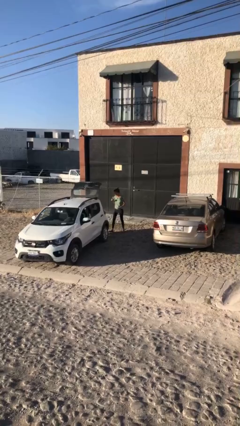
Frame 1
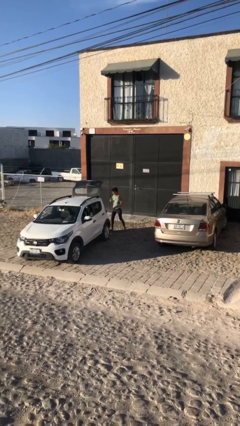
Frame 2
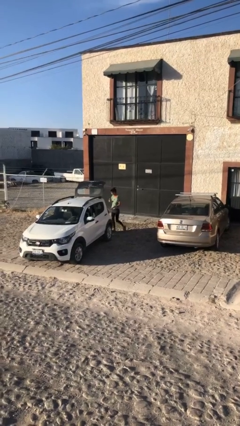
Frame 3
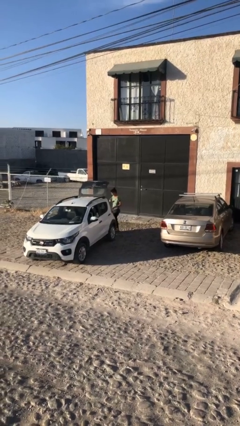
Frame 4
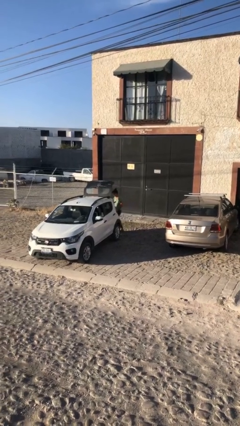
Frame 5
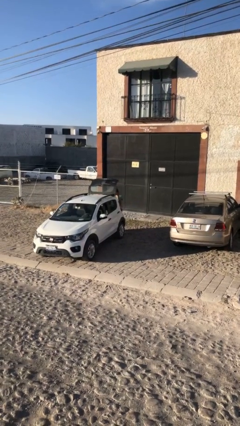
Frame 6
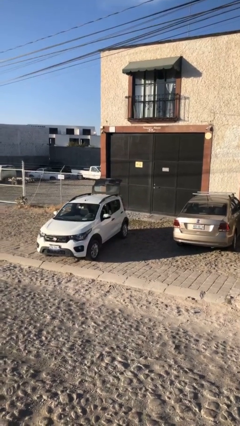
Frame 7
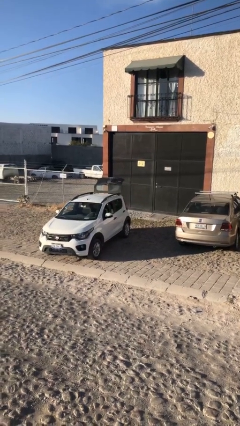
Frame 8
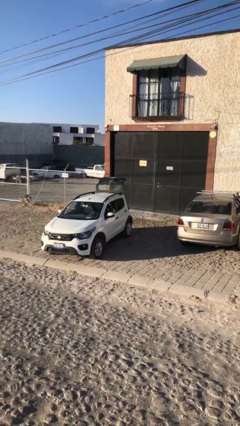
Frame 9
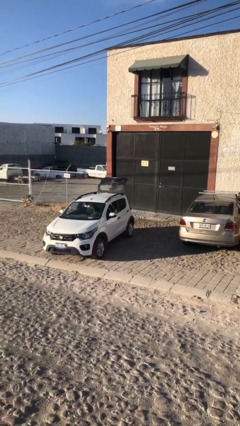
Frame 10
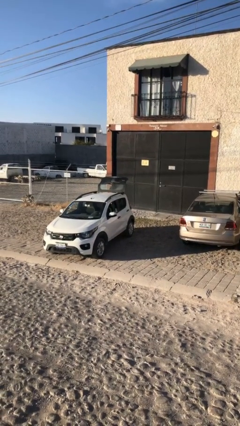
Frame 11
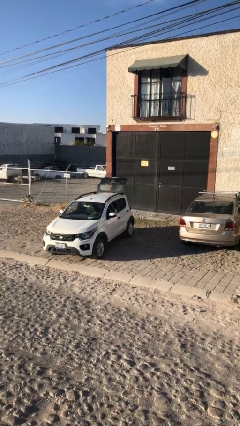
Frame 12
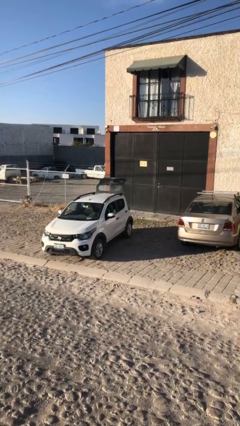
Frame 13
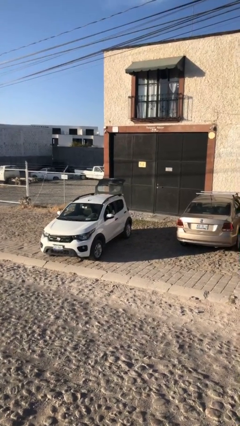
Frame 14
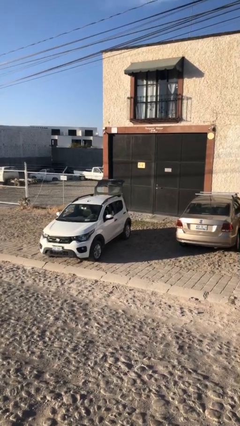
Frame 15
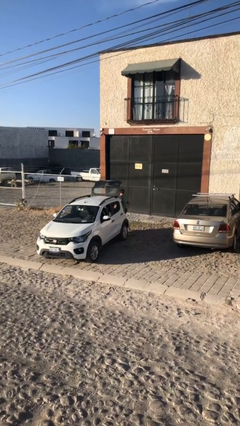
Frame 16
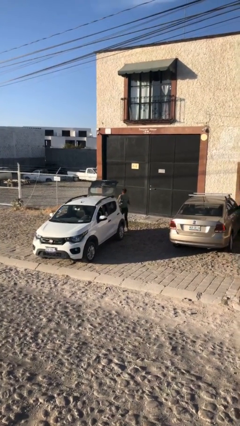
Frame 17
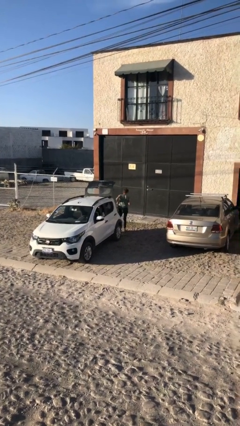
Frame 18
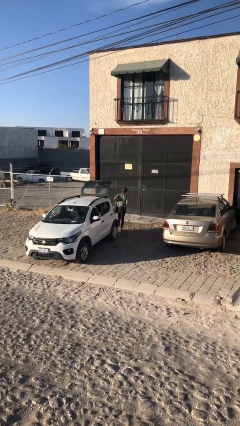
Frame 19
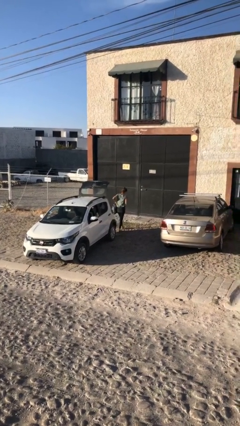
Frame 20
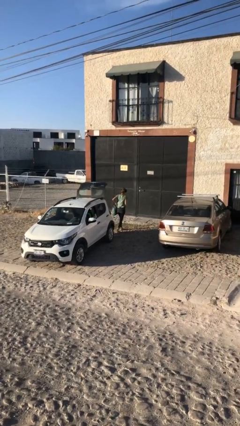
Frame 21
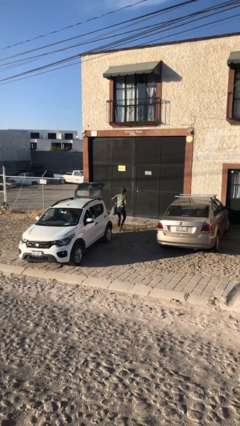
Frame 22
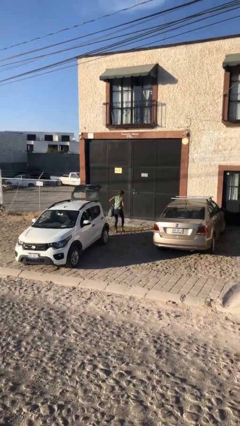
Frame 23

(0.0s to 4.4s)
person unloads car

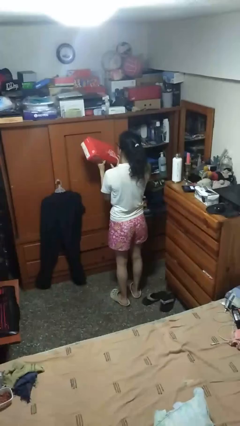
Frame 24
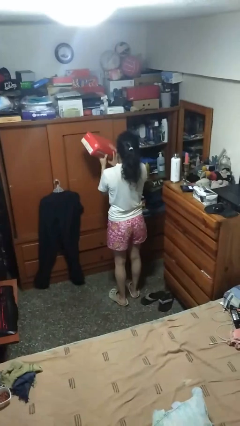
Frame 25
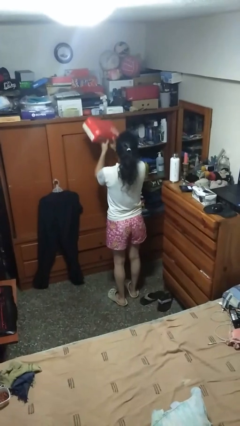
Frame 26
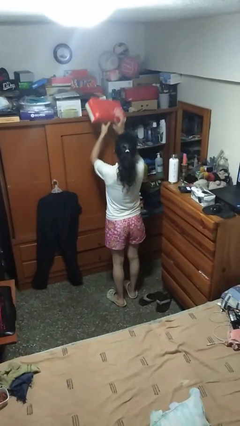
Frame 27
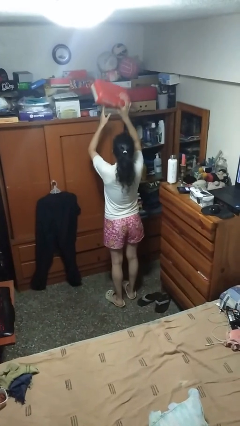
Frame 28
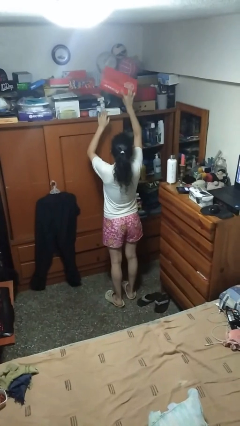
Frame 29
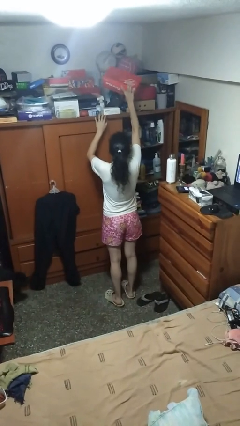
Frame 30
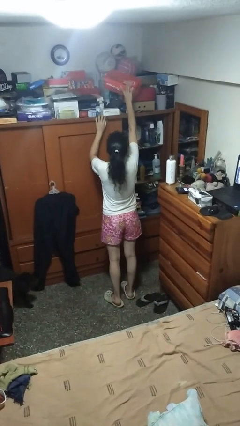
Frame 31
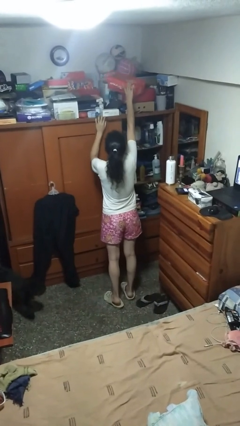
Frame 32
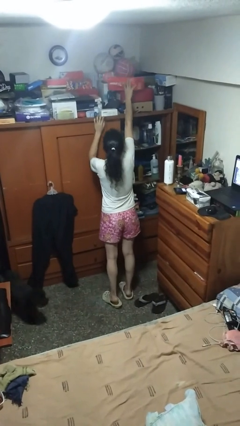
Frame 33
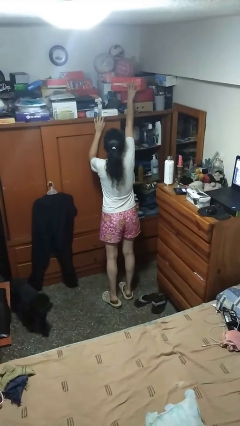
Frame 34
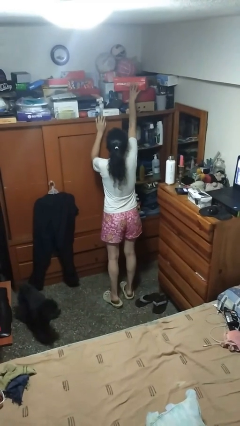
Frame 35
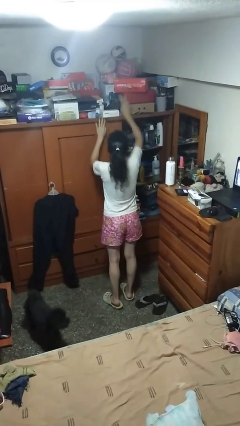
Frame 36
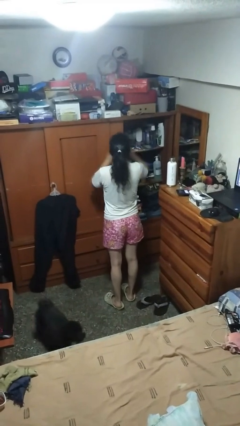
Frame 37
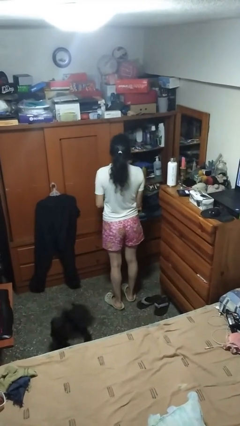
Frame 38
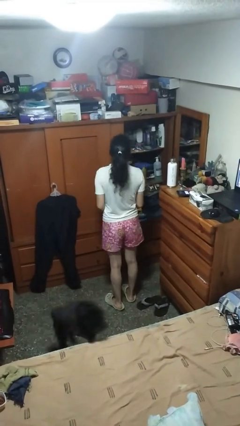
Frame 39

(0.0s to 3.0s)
person puts down object on shelf

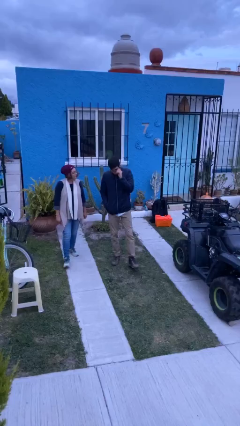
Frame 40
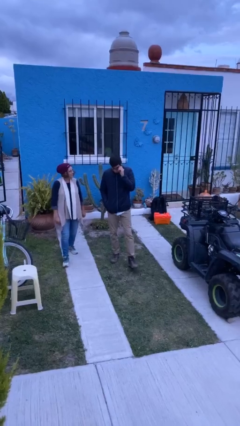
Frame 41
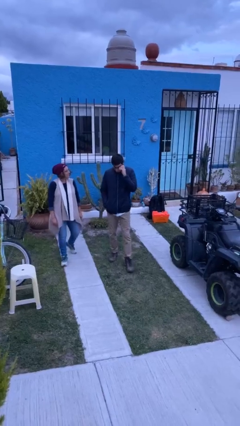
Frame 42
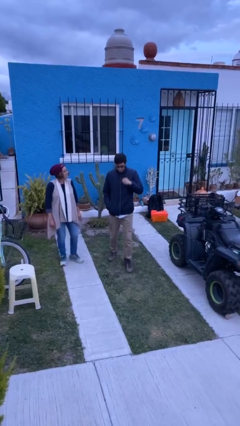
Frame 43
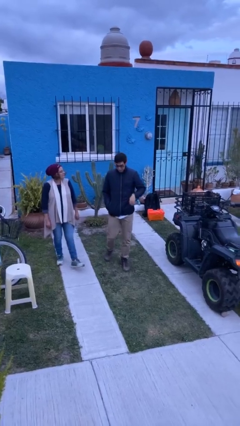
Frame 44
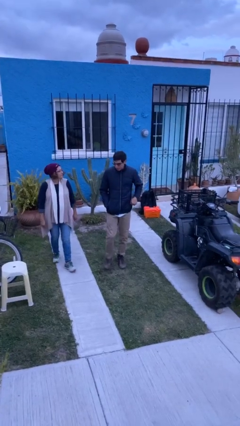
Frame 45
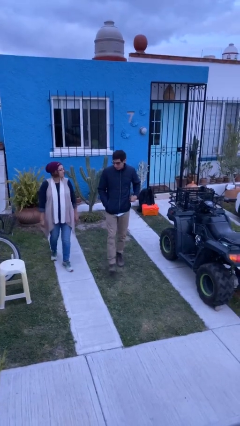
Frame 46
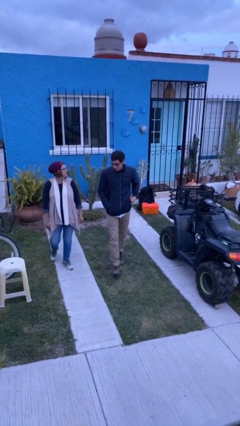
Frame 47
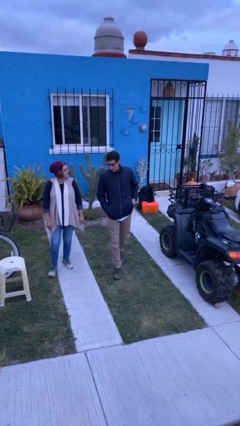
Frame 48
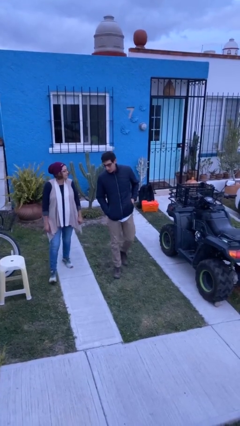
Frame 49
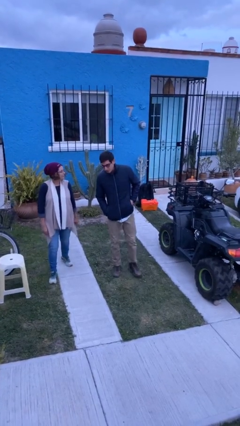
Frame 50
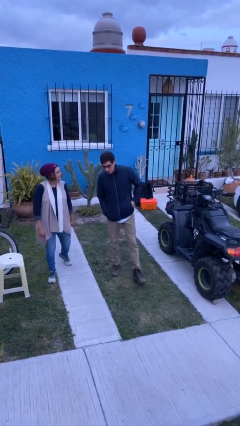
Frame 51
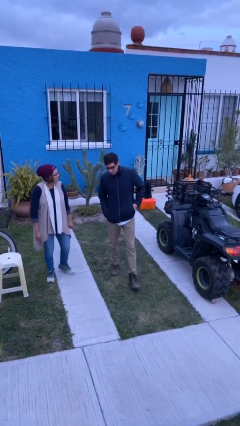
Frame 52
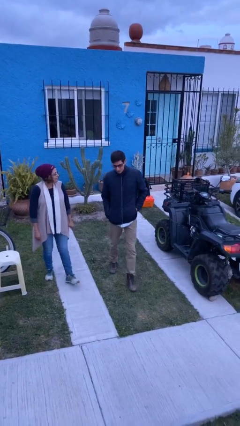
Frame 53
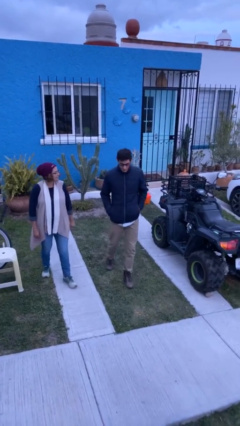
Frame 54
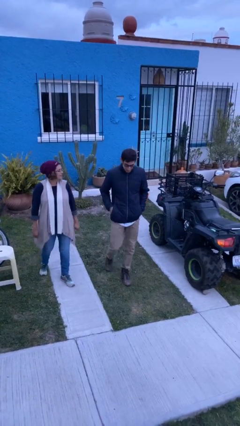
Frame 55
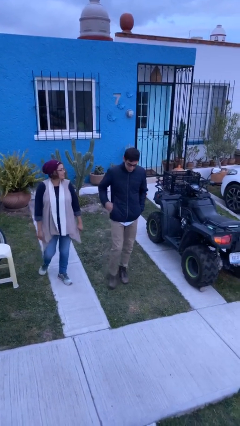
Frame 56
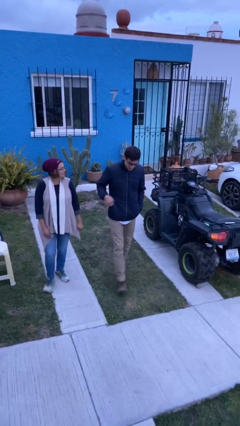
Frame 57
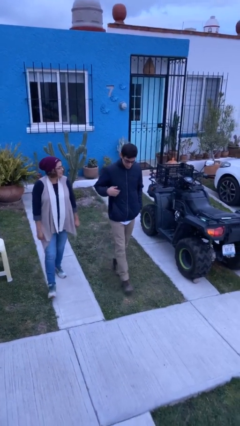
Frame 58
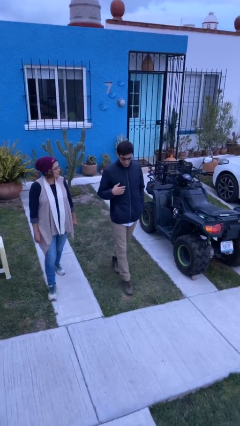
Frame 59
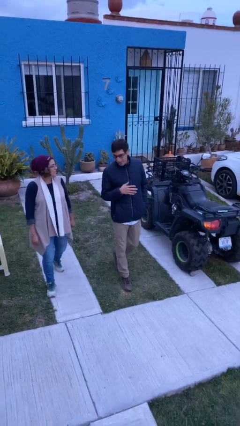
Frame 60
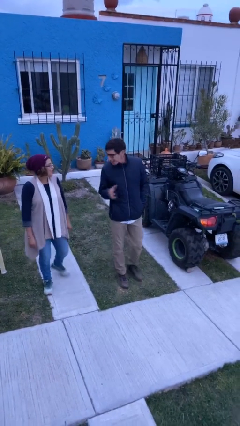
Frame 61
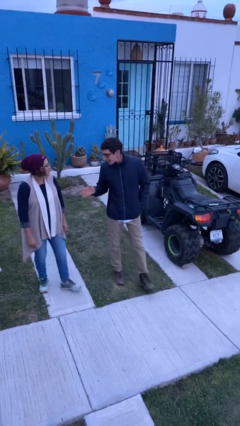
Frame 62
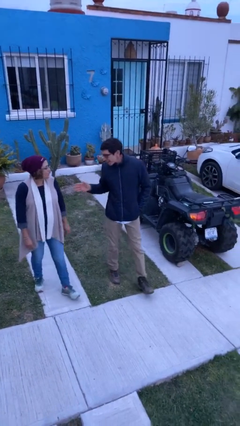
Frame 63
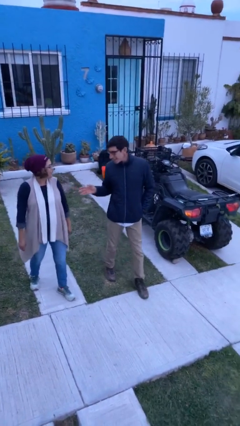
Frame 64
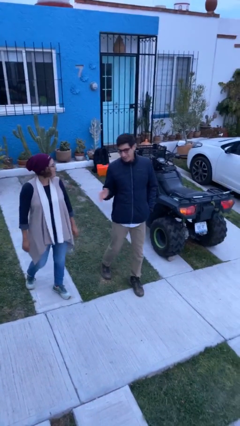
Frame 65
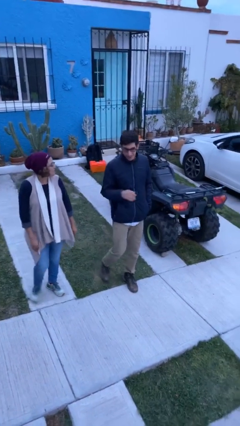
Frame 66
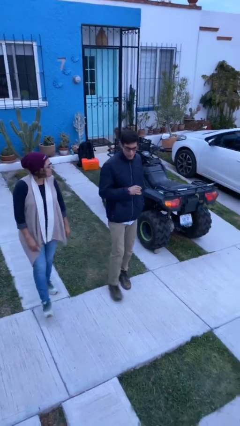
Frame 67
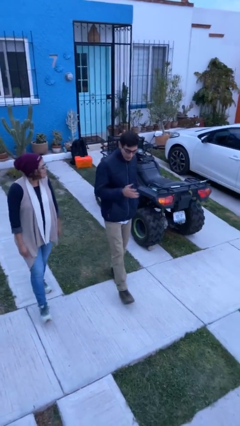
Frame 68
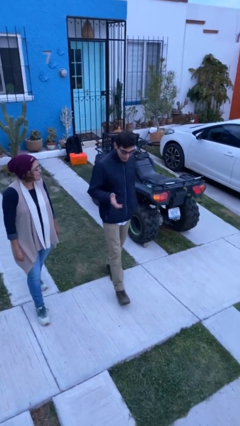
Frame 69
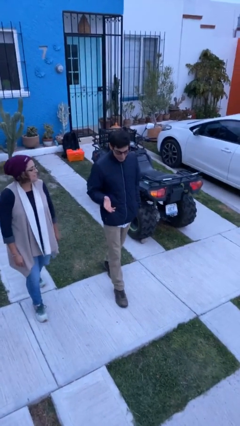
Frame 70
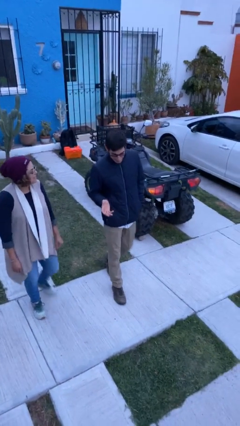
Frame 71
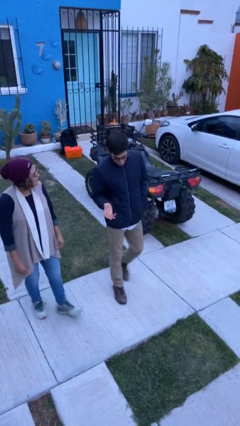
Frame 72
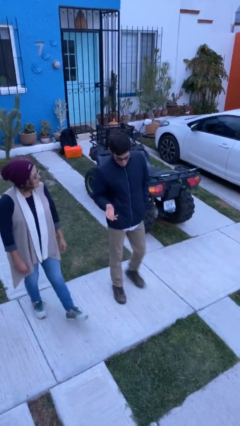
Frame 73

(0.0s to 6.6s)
person talks to person

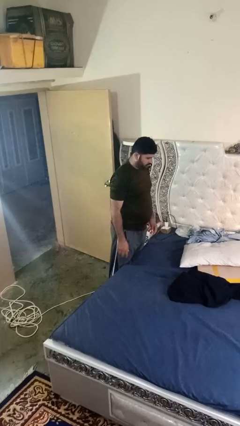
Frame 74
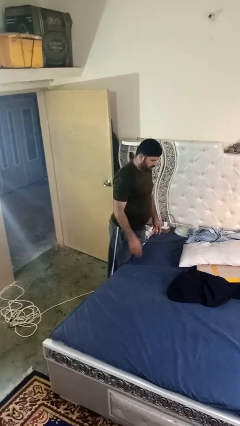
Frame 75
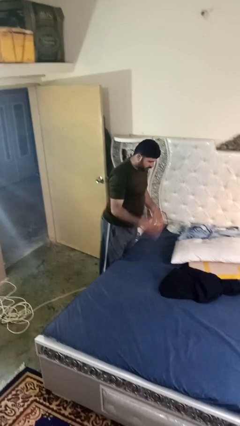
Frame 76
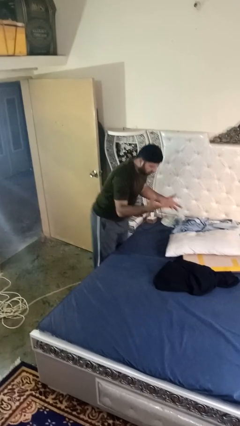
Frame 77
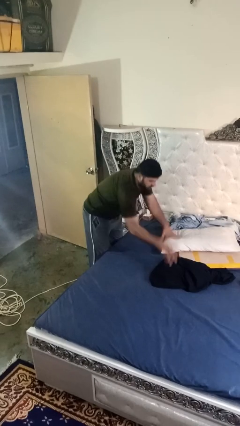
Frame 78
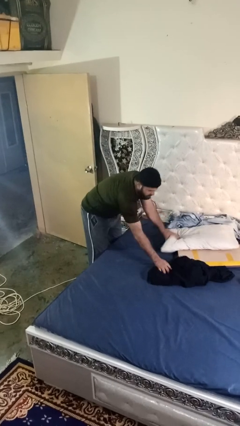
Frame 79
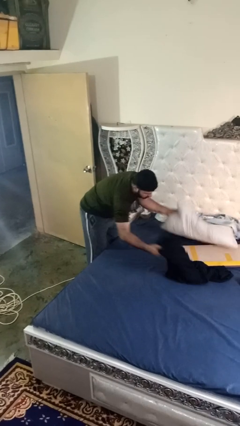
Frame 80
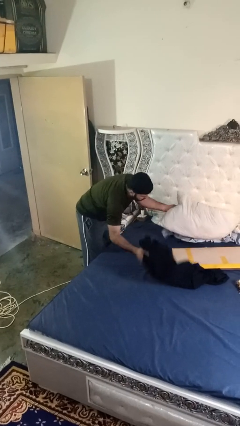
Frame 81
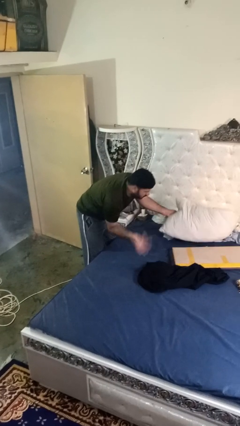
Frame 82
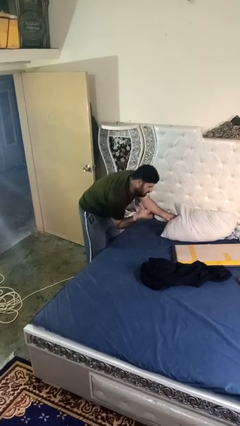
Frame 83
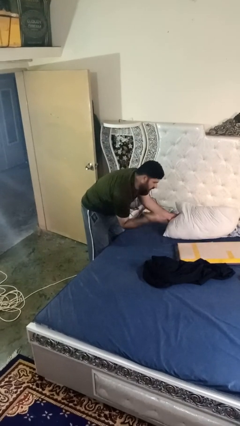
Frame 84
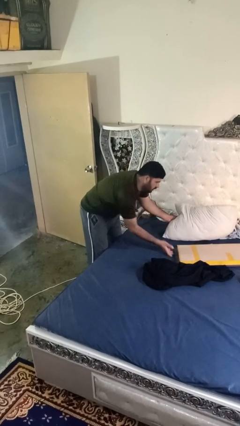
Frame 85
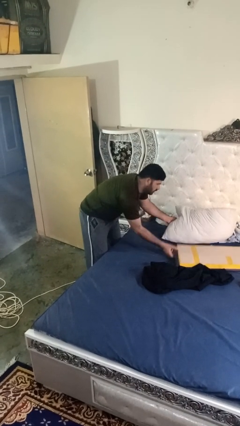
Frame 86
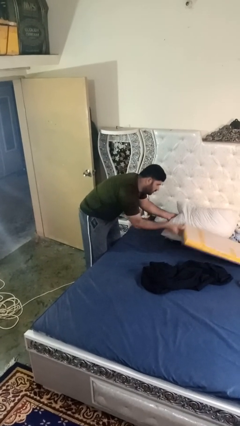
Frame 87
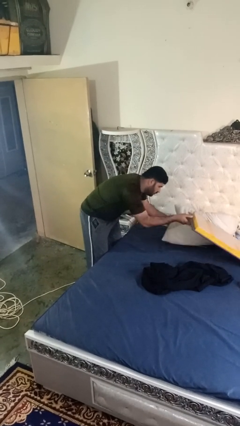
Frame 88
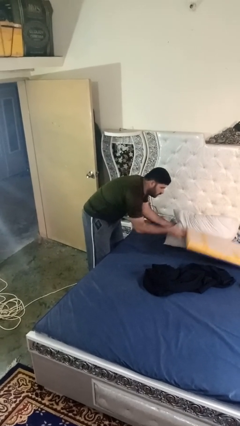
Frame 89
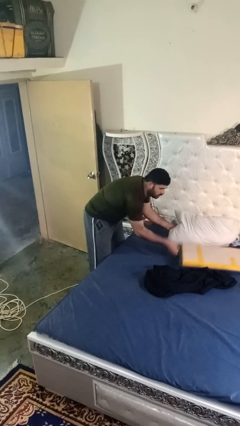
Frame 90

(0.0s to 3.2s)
person searches under bed

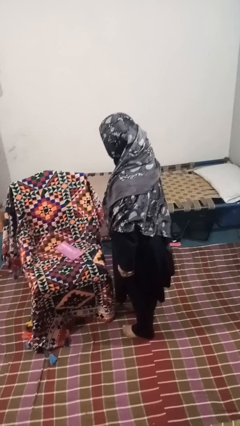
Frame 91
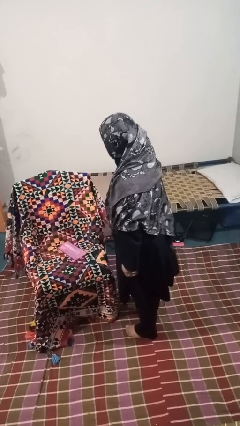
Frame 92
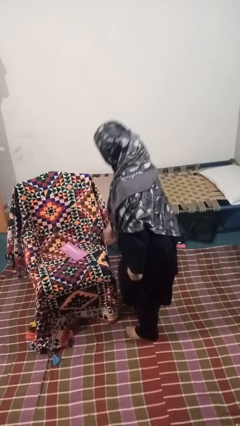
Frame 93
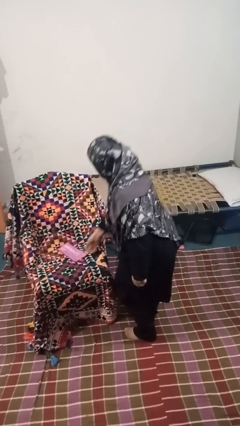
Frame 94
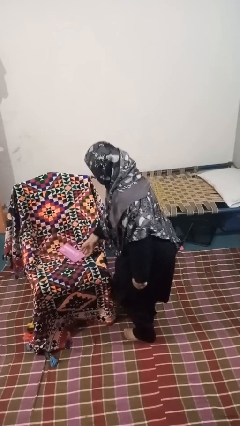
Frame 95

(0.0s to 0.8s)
person puts down object on couch
